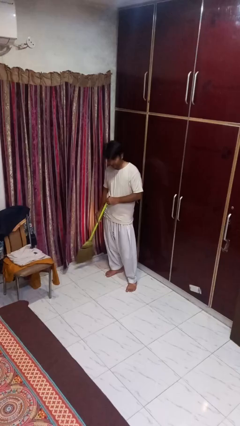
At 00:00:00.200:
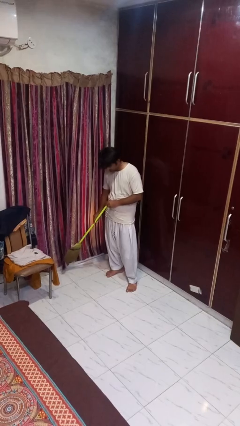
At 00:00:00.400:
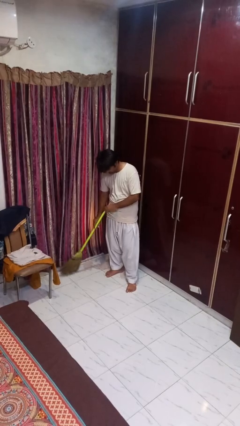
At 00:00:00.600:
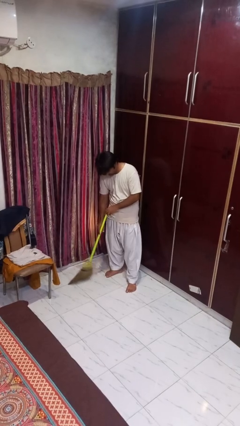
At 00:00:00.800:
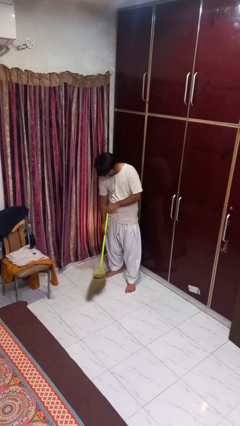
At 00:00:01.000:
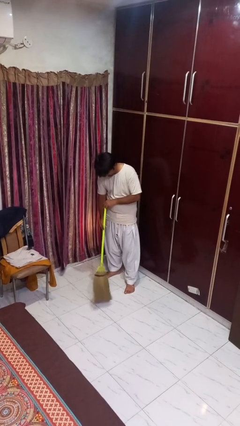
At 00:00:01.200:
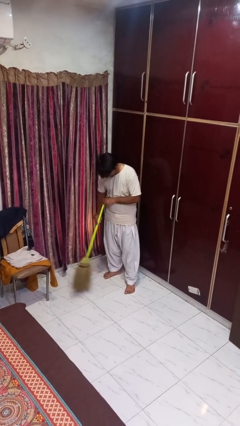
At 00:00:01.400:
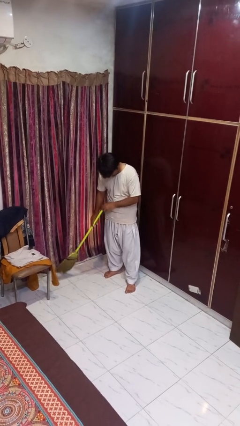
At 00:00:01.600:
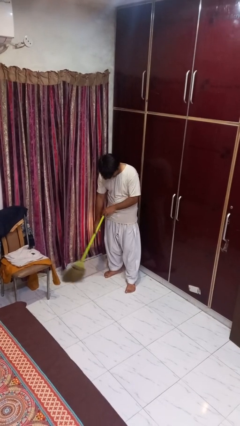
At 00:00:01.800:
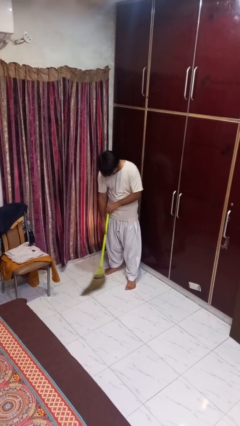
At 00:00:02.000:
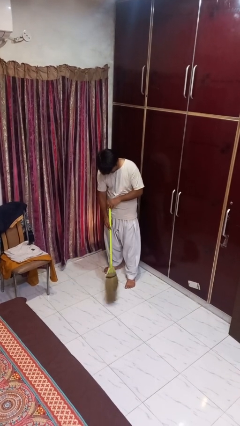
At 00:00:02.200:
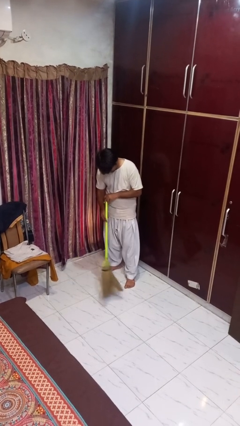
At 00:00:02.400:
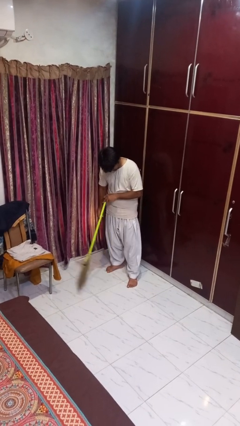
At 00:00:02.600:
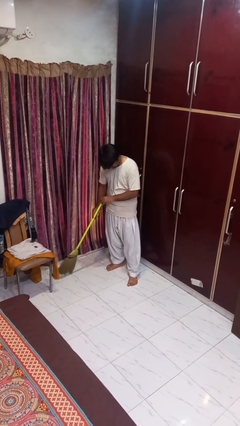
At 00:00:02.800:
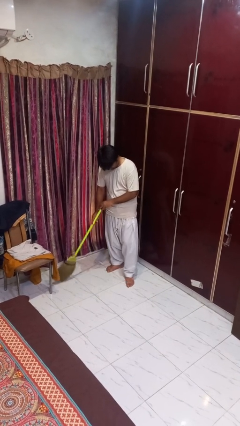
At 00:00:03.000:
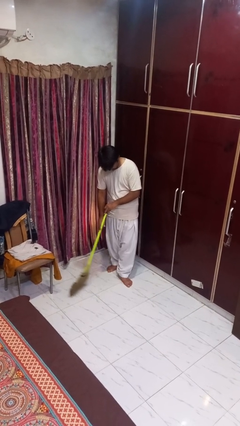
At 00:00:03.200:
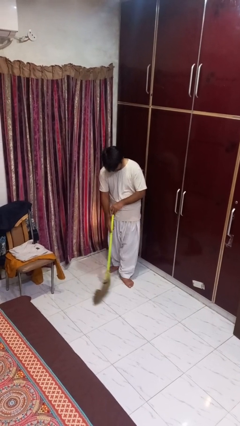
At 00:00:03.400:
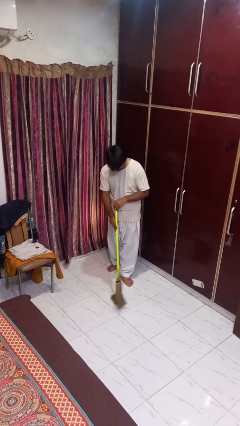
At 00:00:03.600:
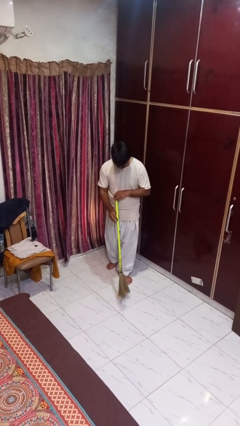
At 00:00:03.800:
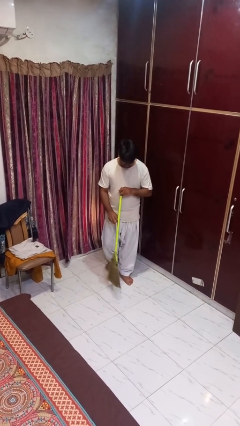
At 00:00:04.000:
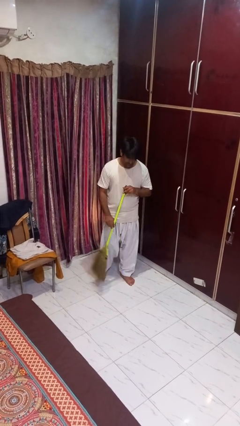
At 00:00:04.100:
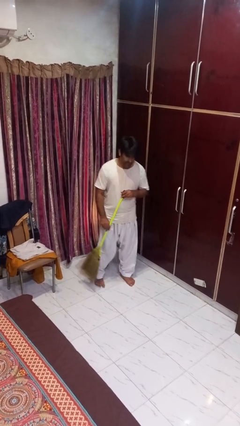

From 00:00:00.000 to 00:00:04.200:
person sweeps floor

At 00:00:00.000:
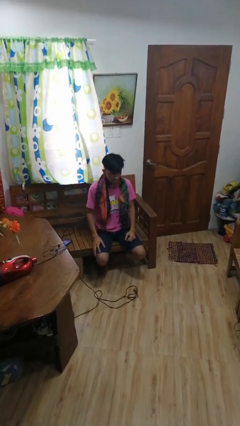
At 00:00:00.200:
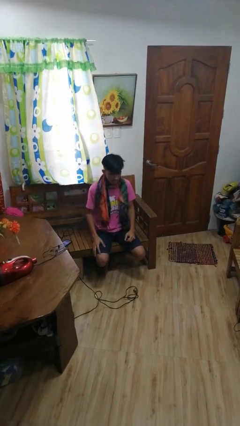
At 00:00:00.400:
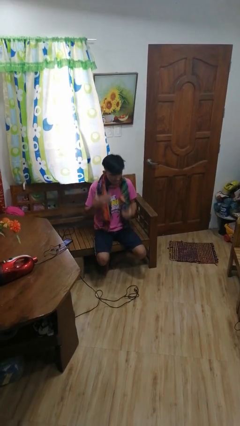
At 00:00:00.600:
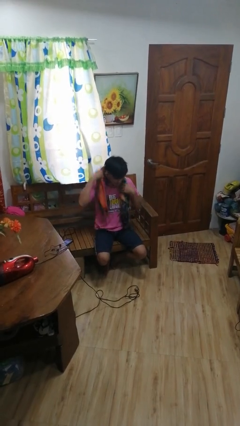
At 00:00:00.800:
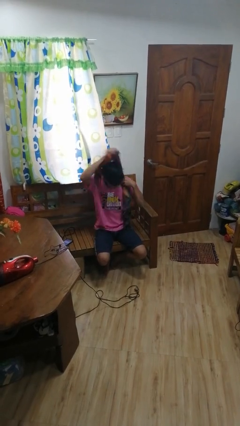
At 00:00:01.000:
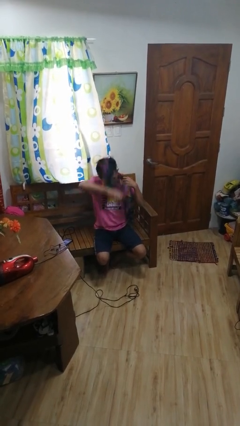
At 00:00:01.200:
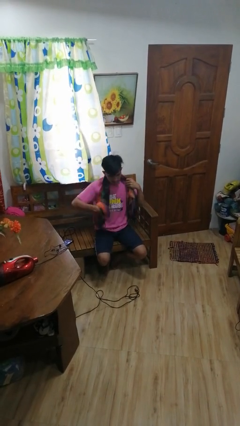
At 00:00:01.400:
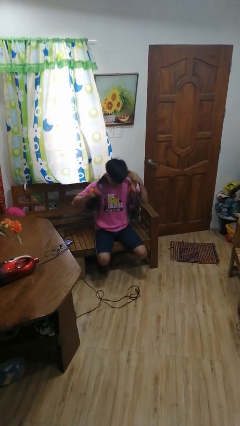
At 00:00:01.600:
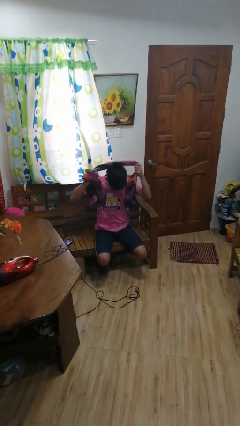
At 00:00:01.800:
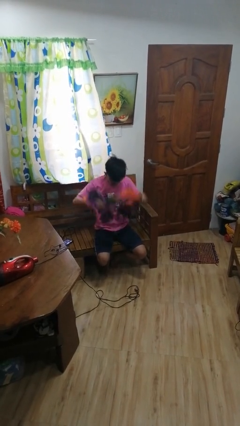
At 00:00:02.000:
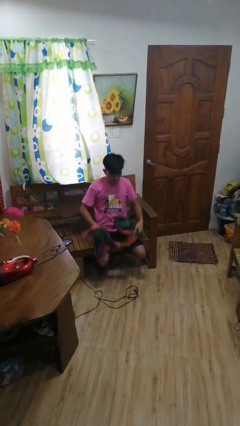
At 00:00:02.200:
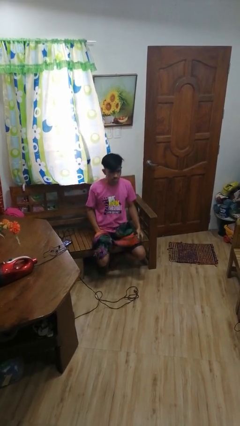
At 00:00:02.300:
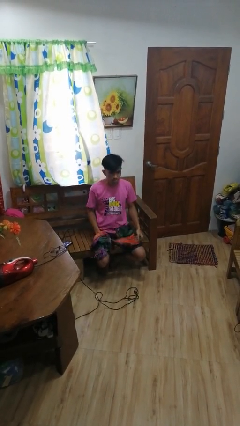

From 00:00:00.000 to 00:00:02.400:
person takes off scarf

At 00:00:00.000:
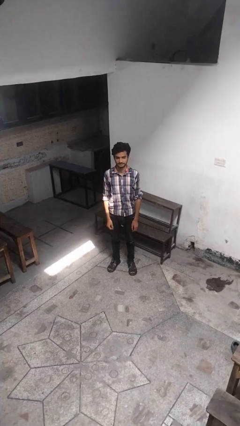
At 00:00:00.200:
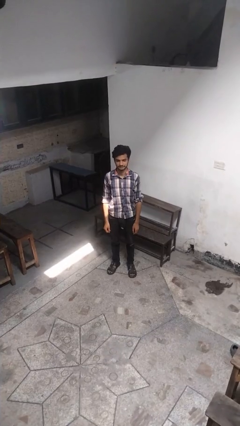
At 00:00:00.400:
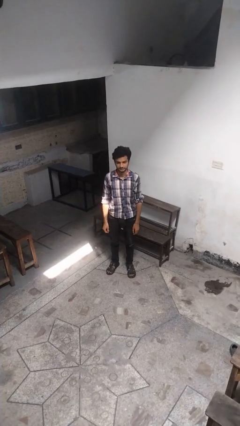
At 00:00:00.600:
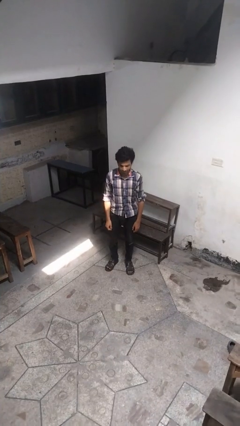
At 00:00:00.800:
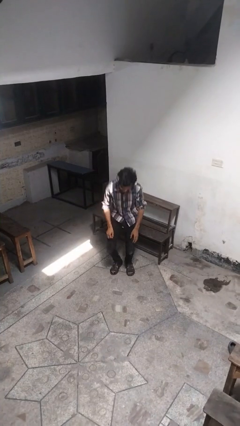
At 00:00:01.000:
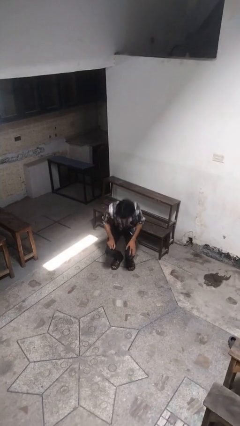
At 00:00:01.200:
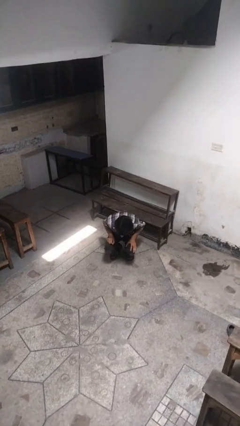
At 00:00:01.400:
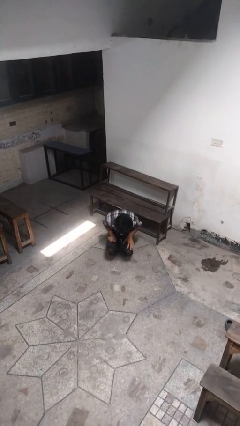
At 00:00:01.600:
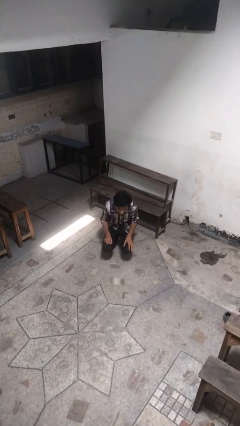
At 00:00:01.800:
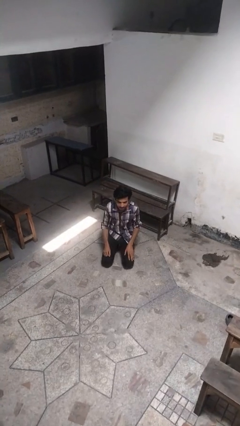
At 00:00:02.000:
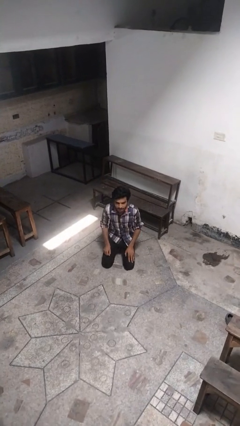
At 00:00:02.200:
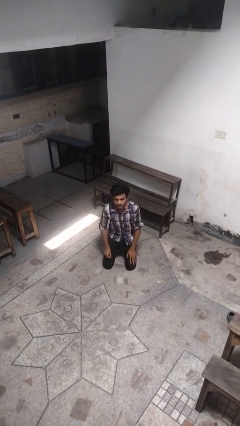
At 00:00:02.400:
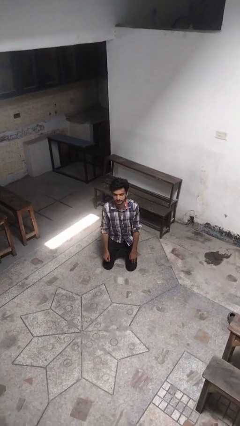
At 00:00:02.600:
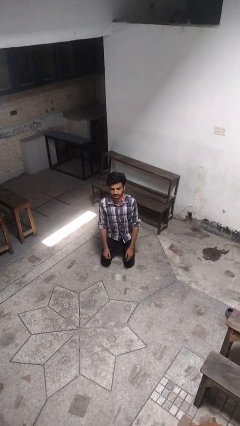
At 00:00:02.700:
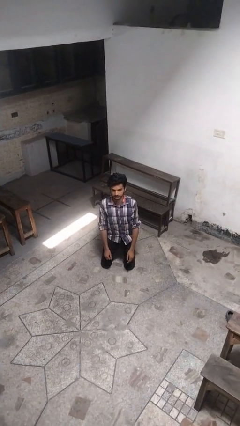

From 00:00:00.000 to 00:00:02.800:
person kneels

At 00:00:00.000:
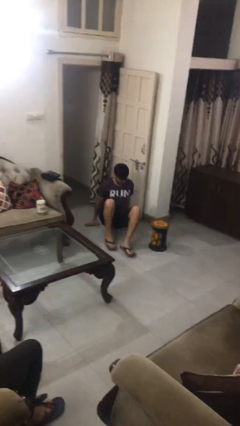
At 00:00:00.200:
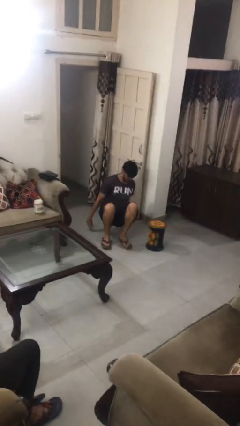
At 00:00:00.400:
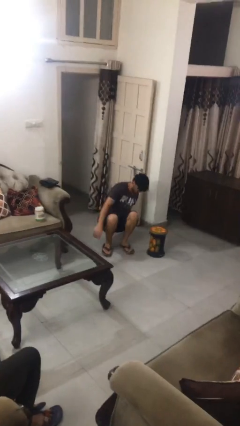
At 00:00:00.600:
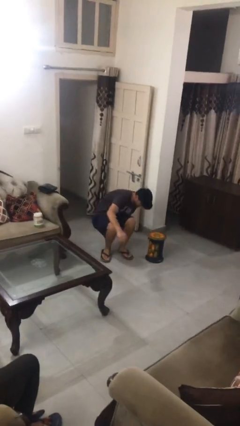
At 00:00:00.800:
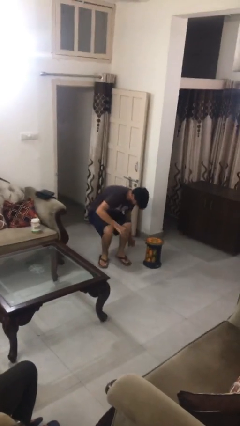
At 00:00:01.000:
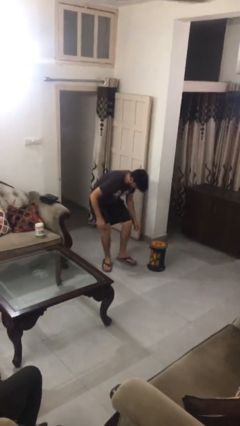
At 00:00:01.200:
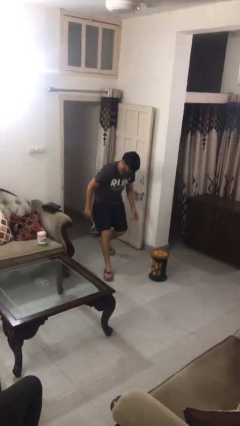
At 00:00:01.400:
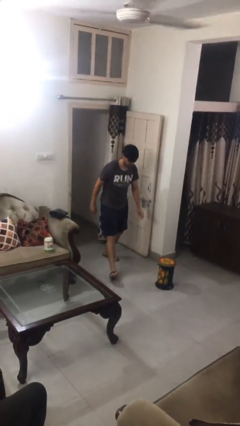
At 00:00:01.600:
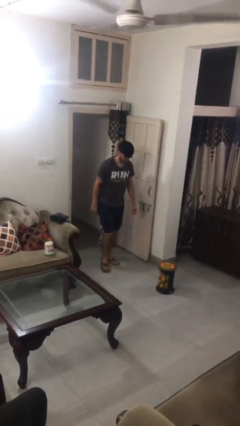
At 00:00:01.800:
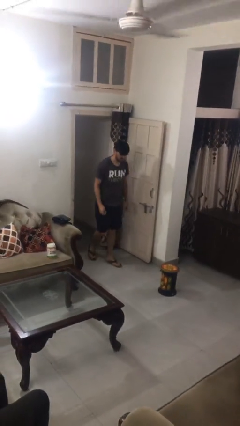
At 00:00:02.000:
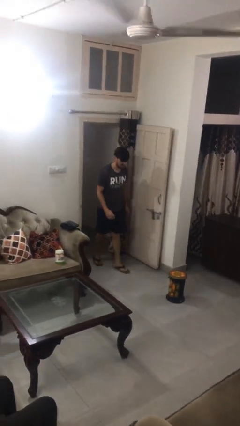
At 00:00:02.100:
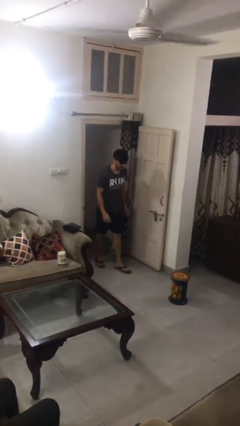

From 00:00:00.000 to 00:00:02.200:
person stands up from floor

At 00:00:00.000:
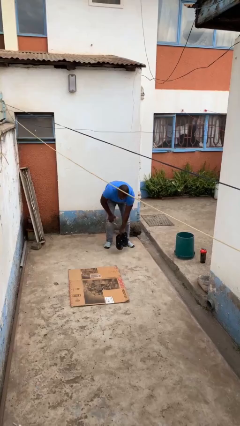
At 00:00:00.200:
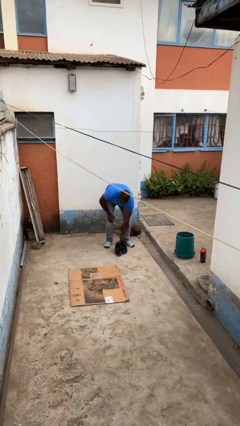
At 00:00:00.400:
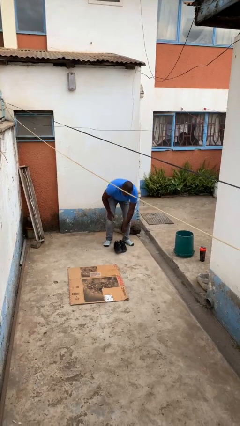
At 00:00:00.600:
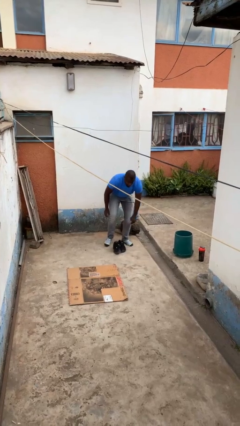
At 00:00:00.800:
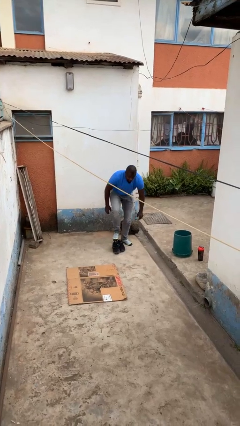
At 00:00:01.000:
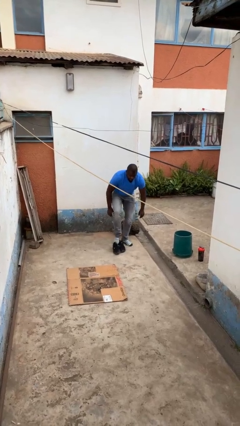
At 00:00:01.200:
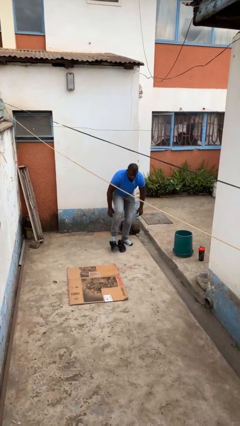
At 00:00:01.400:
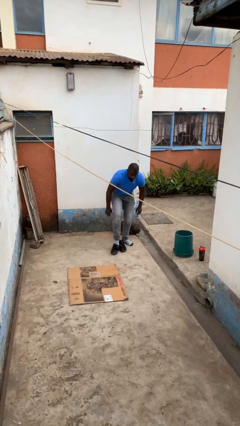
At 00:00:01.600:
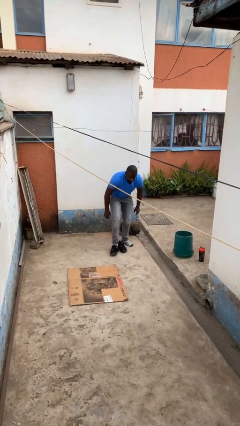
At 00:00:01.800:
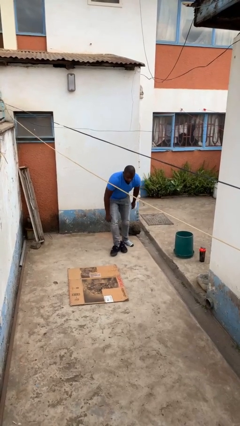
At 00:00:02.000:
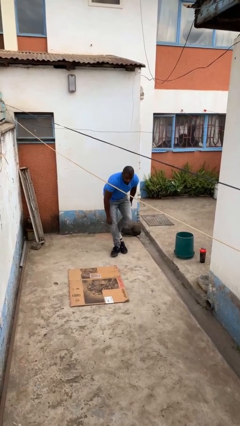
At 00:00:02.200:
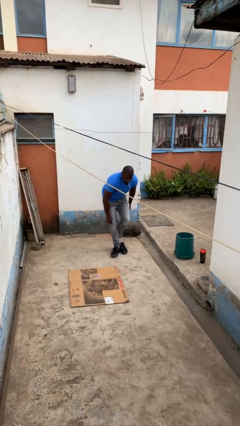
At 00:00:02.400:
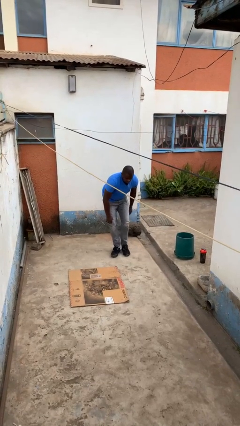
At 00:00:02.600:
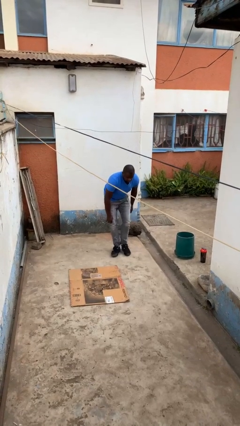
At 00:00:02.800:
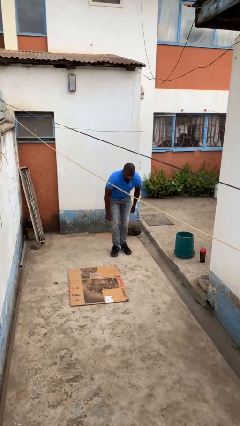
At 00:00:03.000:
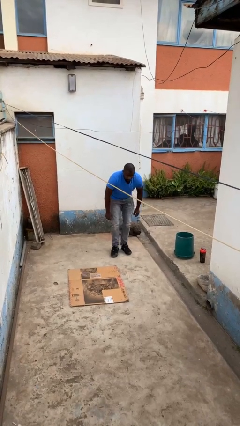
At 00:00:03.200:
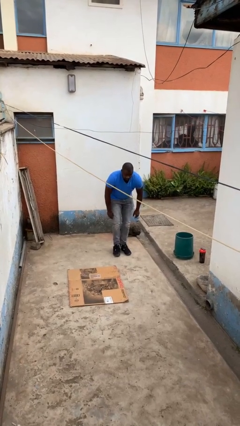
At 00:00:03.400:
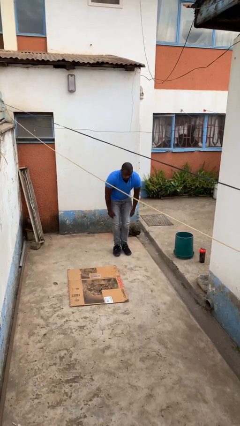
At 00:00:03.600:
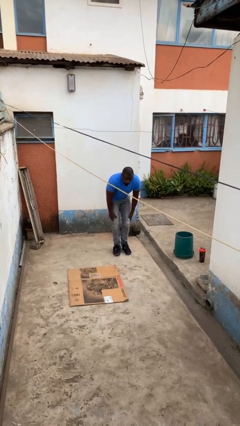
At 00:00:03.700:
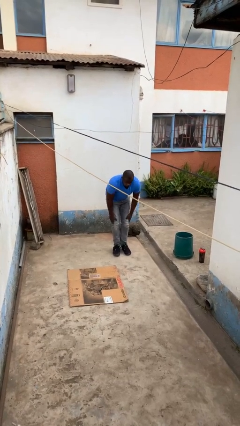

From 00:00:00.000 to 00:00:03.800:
person puts on shoes

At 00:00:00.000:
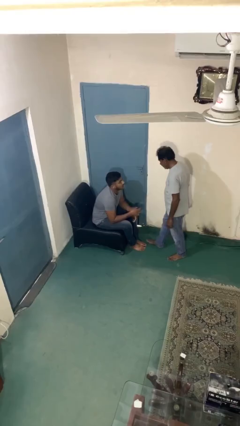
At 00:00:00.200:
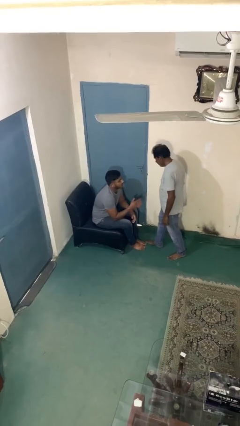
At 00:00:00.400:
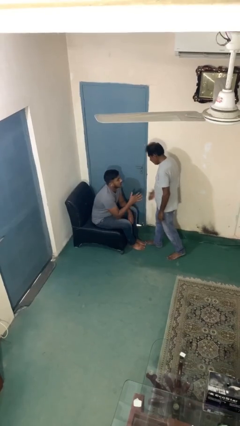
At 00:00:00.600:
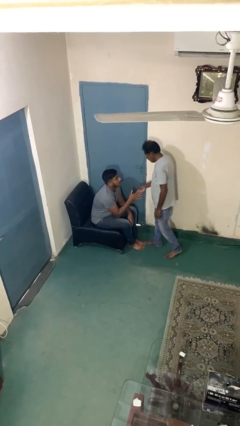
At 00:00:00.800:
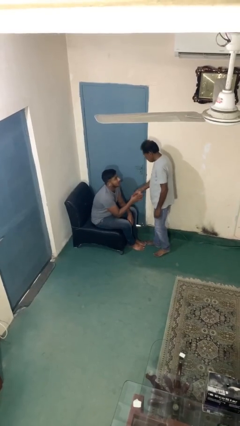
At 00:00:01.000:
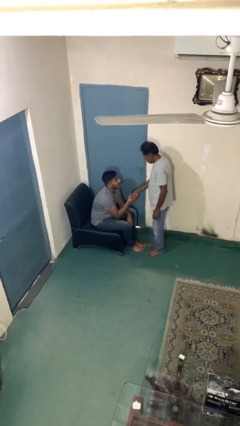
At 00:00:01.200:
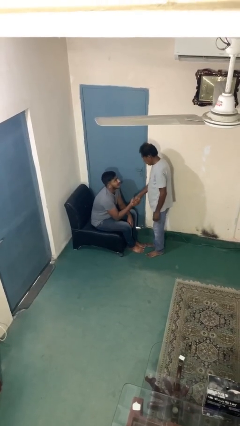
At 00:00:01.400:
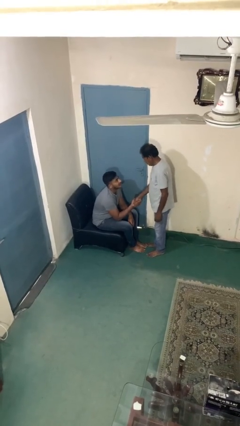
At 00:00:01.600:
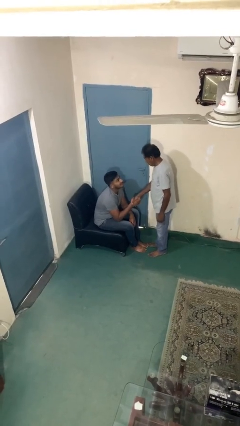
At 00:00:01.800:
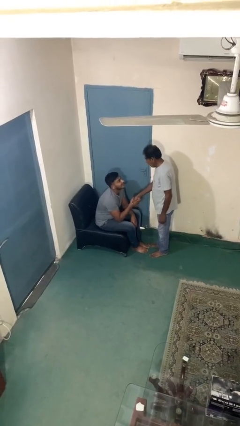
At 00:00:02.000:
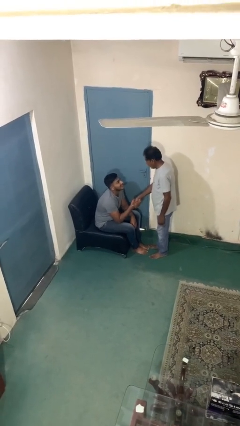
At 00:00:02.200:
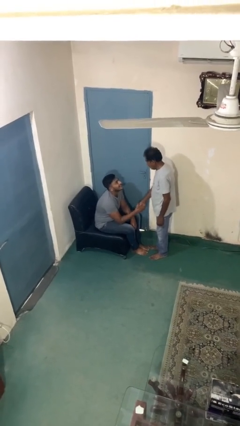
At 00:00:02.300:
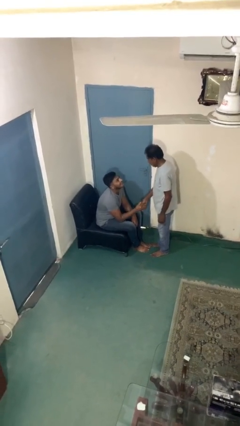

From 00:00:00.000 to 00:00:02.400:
person shakes hand
